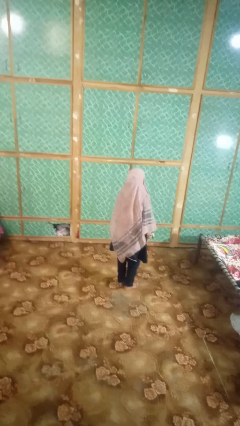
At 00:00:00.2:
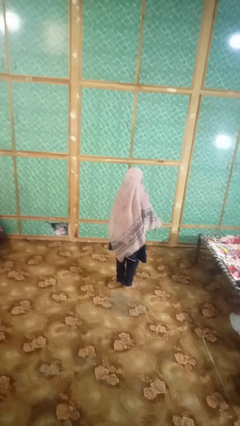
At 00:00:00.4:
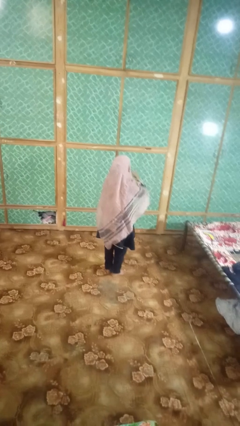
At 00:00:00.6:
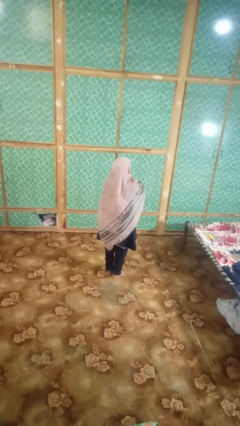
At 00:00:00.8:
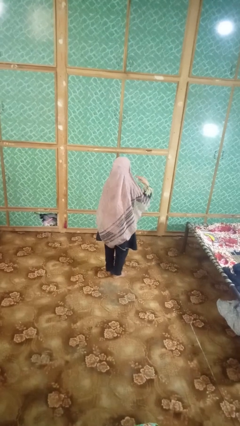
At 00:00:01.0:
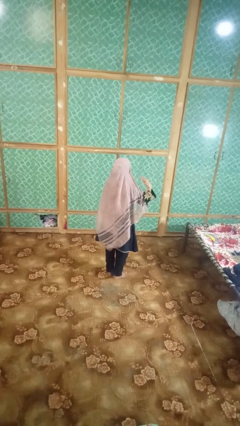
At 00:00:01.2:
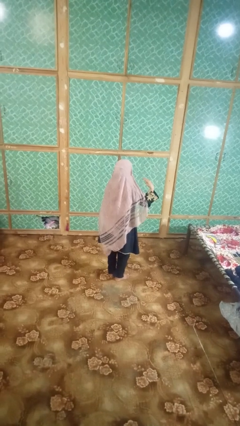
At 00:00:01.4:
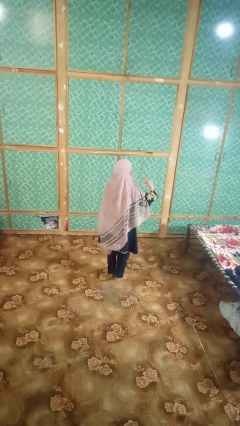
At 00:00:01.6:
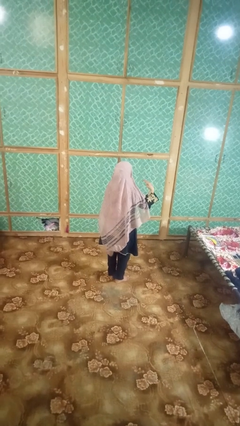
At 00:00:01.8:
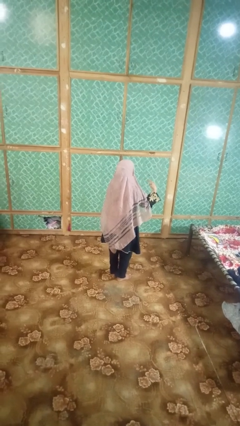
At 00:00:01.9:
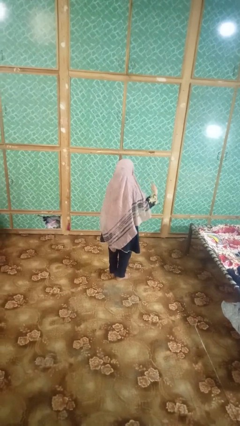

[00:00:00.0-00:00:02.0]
person gestures cut

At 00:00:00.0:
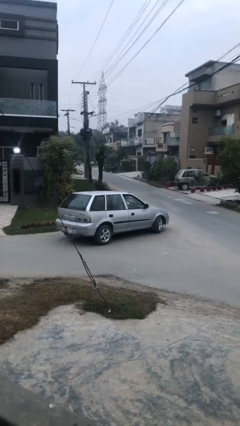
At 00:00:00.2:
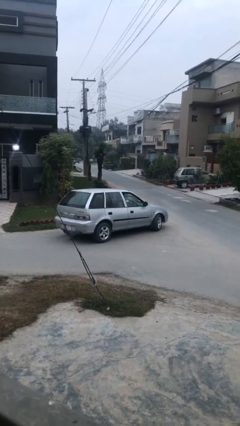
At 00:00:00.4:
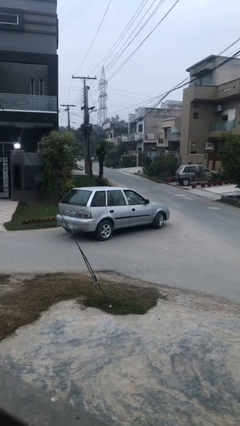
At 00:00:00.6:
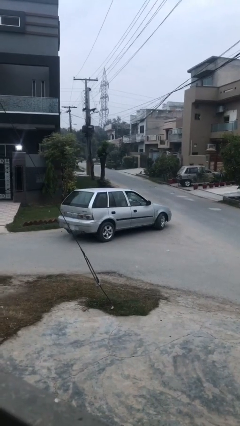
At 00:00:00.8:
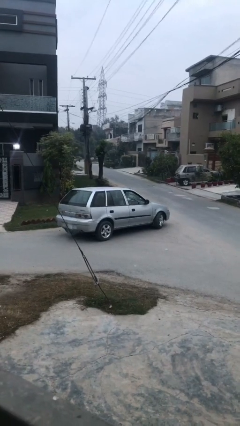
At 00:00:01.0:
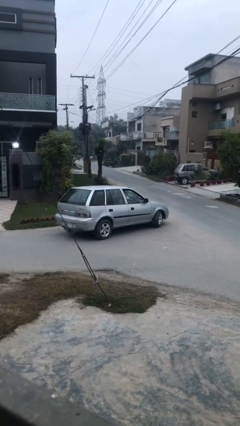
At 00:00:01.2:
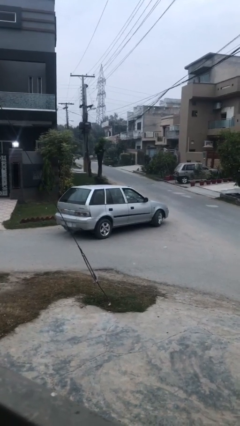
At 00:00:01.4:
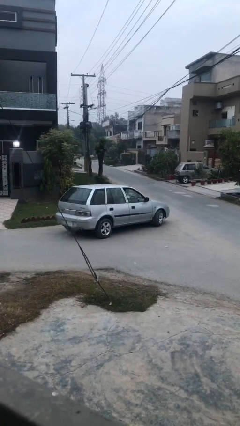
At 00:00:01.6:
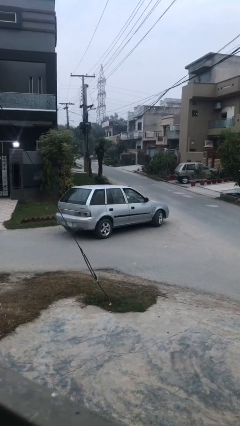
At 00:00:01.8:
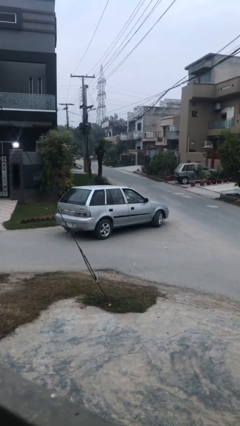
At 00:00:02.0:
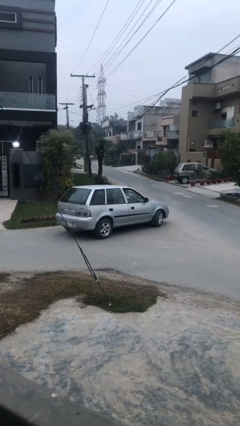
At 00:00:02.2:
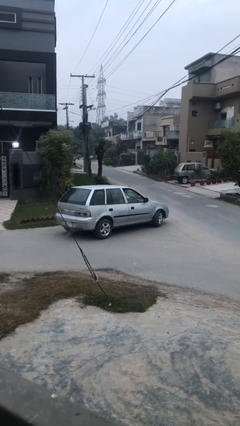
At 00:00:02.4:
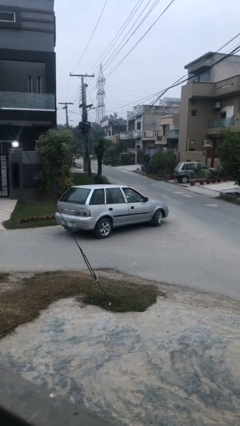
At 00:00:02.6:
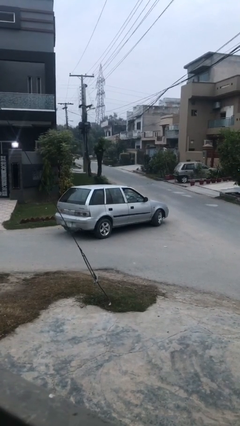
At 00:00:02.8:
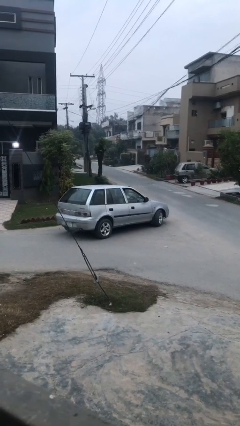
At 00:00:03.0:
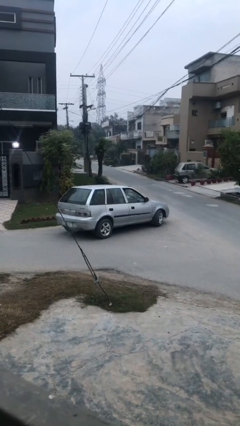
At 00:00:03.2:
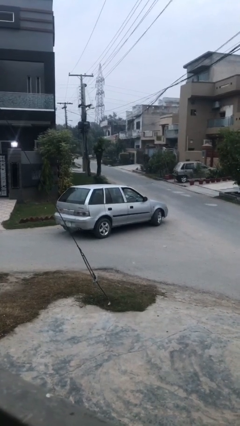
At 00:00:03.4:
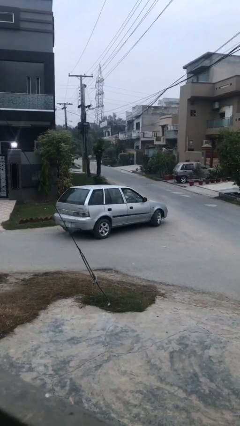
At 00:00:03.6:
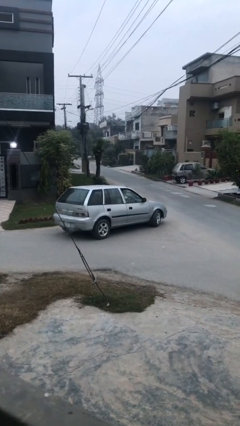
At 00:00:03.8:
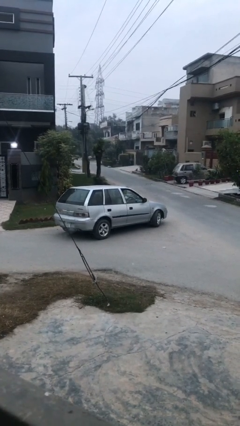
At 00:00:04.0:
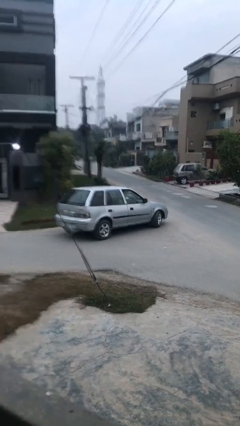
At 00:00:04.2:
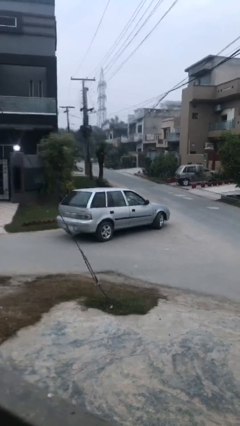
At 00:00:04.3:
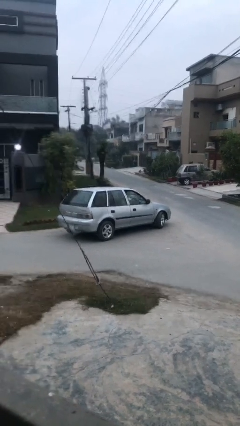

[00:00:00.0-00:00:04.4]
car drops off person

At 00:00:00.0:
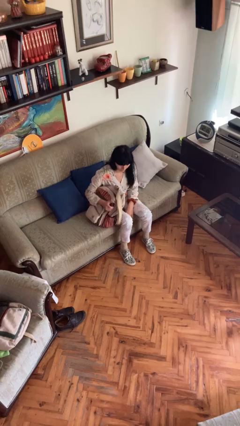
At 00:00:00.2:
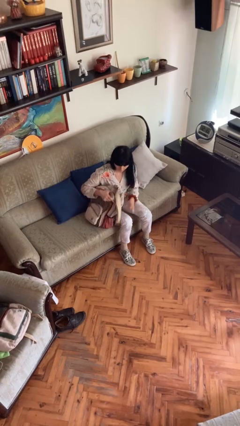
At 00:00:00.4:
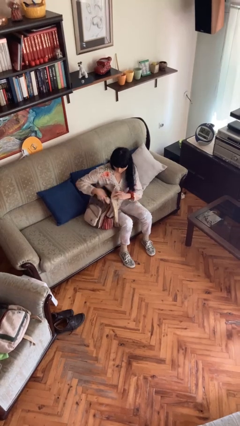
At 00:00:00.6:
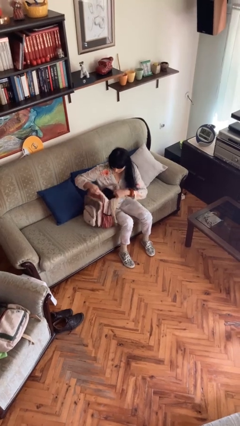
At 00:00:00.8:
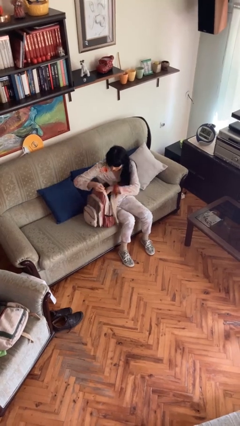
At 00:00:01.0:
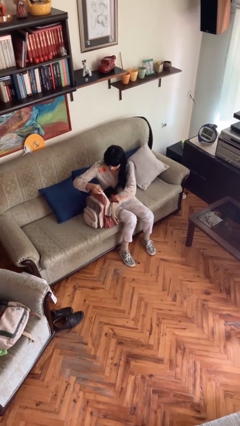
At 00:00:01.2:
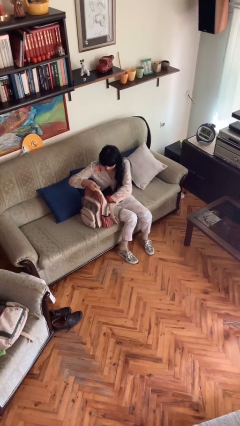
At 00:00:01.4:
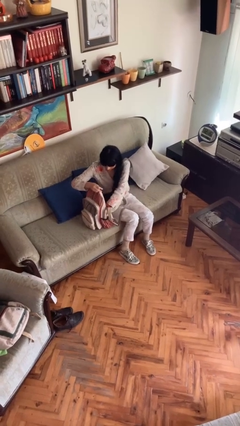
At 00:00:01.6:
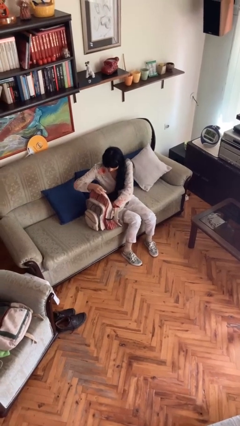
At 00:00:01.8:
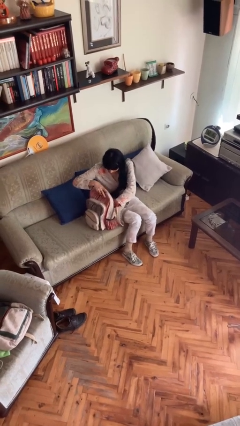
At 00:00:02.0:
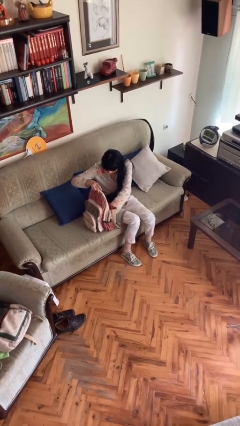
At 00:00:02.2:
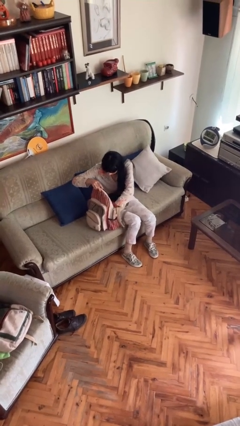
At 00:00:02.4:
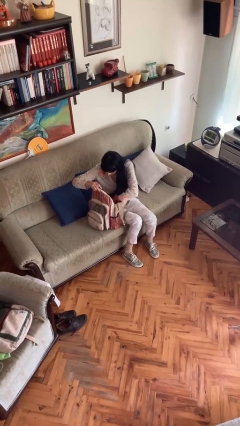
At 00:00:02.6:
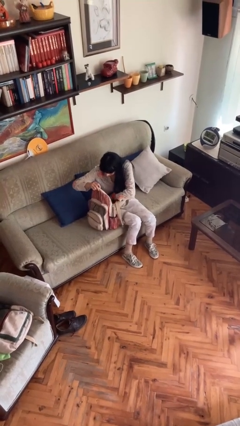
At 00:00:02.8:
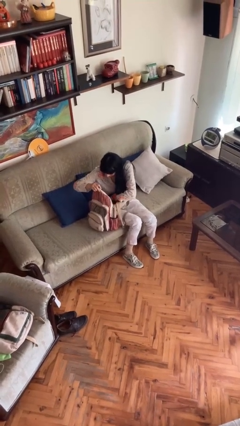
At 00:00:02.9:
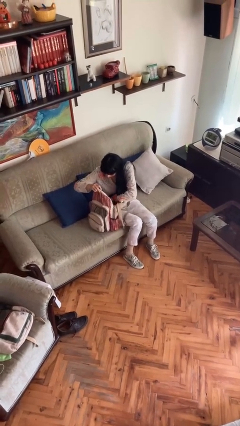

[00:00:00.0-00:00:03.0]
person searches in backpack

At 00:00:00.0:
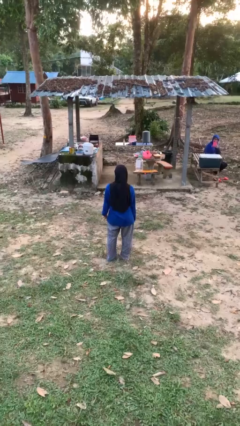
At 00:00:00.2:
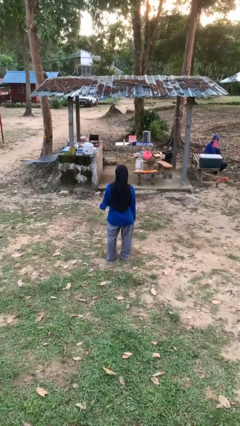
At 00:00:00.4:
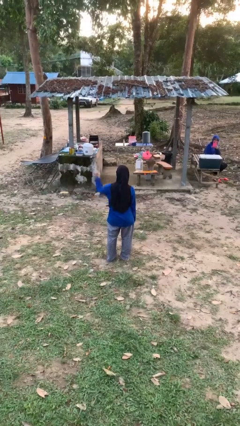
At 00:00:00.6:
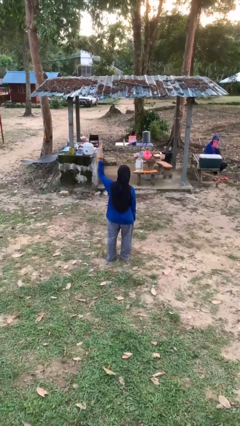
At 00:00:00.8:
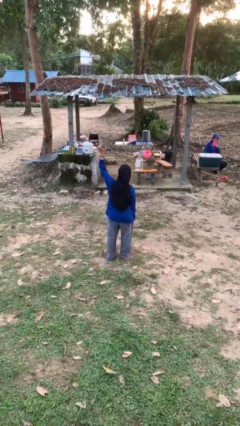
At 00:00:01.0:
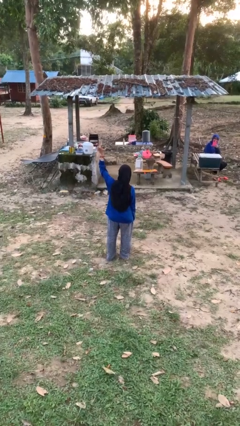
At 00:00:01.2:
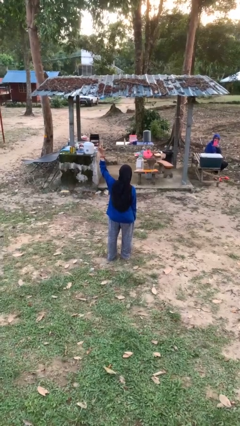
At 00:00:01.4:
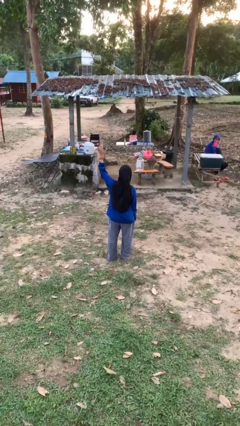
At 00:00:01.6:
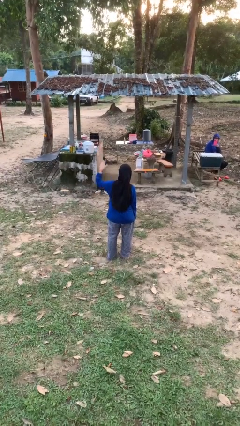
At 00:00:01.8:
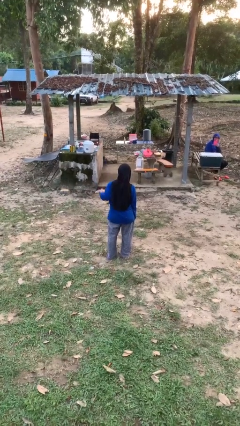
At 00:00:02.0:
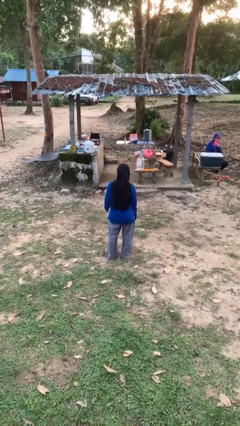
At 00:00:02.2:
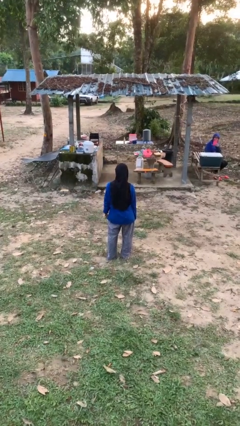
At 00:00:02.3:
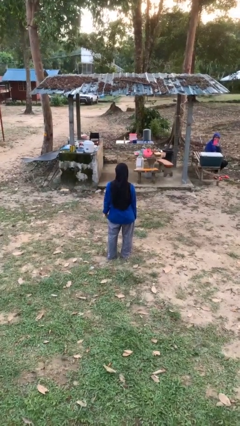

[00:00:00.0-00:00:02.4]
person gestures number five

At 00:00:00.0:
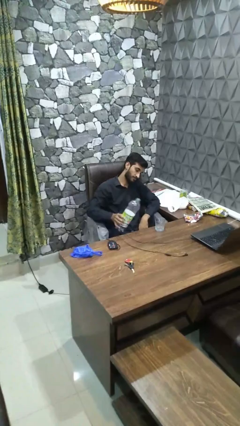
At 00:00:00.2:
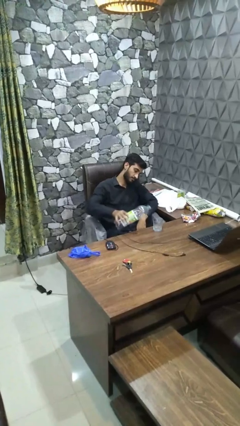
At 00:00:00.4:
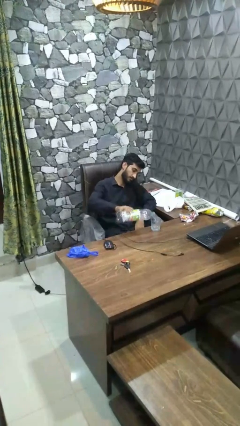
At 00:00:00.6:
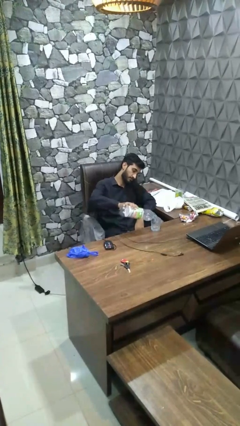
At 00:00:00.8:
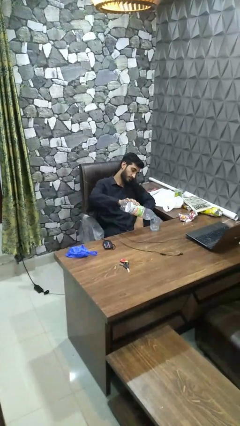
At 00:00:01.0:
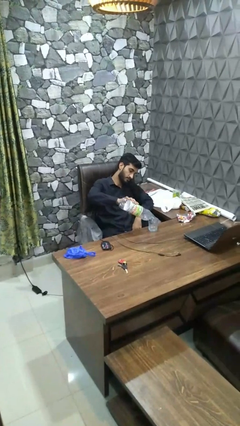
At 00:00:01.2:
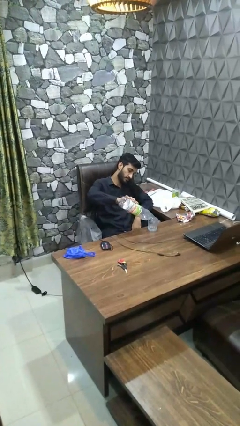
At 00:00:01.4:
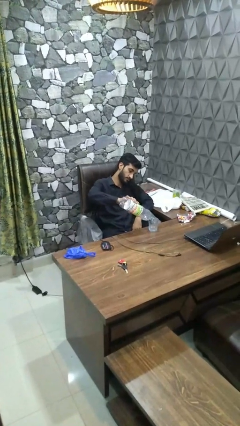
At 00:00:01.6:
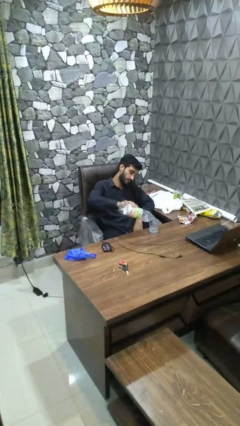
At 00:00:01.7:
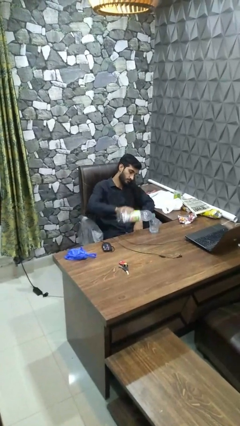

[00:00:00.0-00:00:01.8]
person pours liquid into cup

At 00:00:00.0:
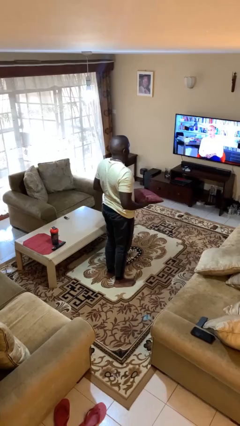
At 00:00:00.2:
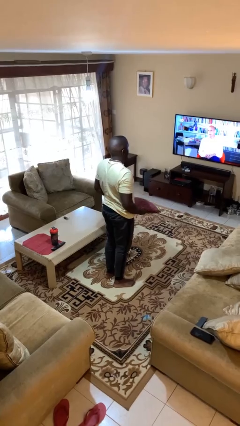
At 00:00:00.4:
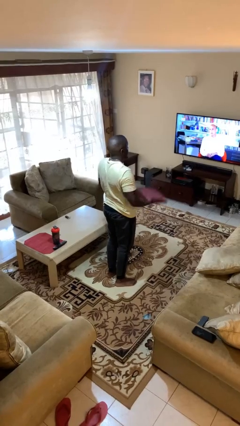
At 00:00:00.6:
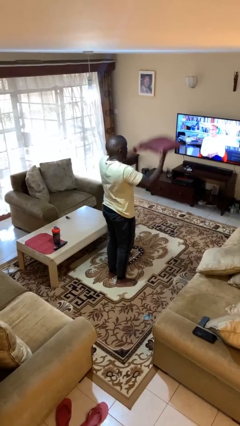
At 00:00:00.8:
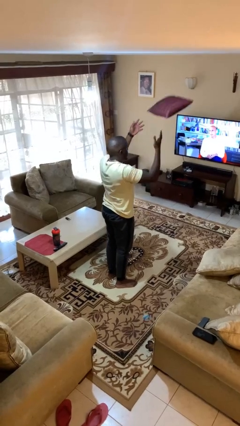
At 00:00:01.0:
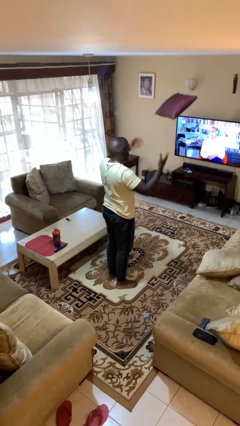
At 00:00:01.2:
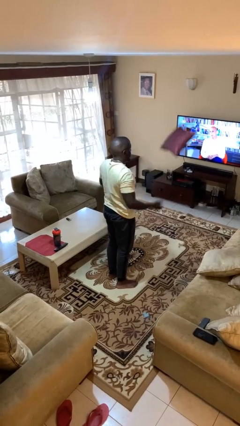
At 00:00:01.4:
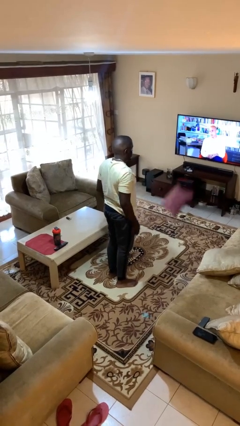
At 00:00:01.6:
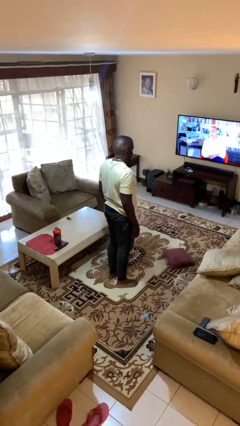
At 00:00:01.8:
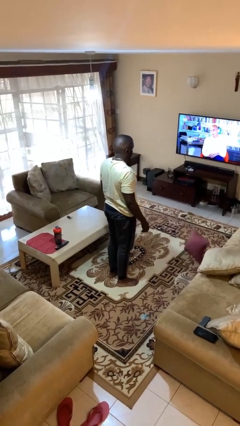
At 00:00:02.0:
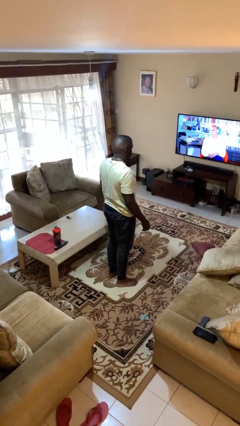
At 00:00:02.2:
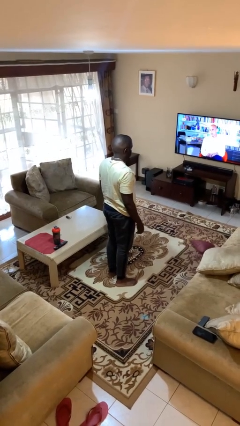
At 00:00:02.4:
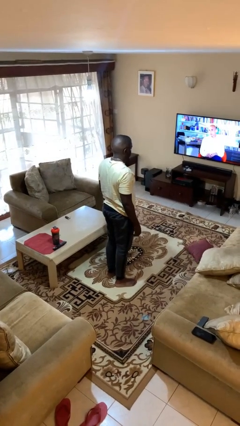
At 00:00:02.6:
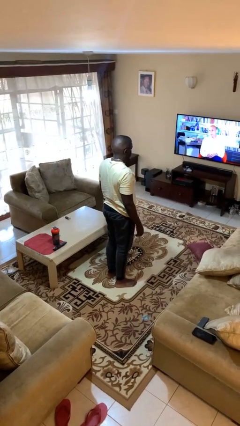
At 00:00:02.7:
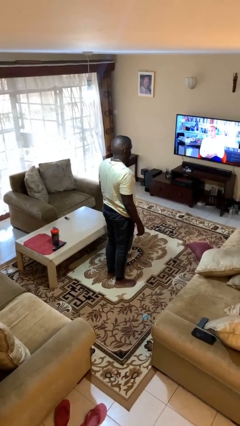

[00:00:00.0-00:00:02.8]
person throws object into air

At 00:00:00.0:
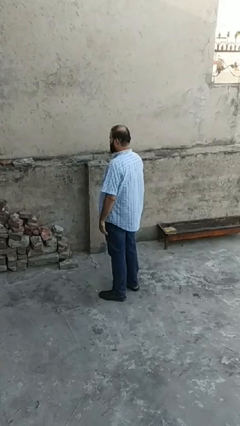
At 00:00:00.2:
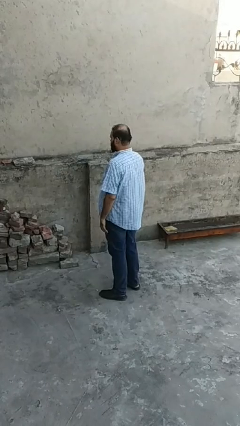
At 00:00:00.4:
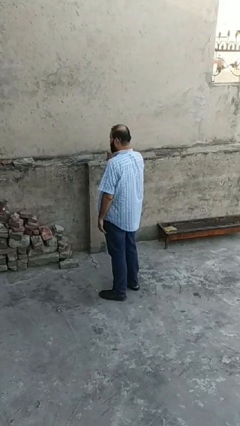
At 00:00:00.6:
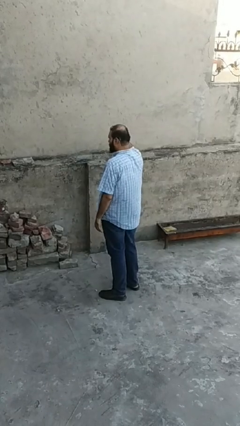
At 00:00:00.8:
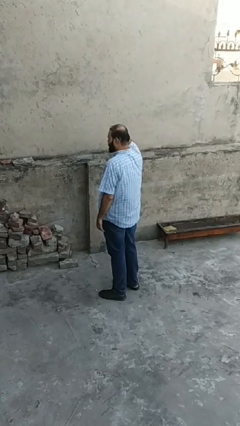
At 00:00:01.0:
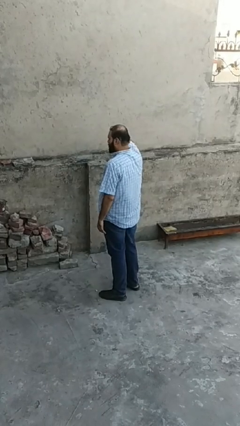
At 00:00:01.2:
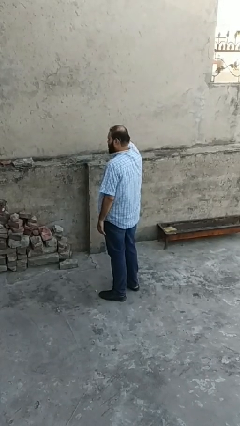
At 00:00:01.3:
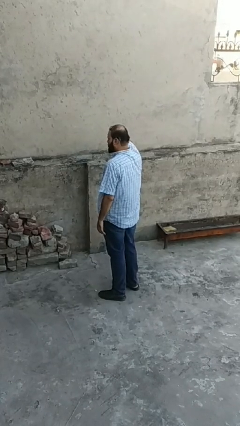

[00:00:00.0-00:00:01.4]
person gestures call me
